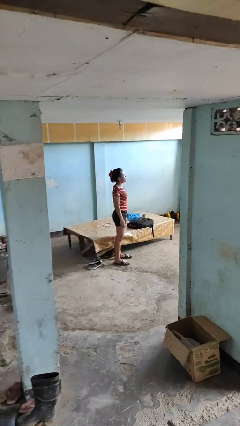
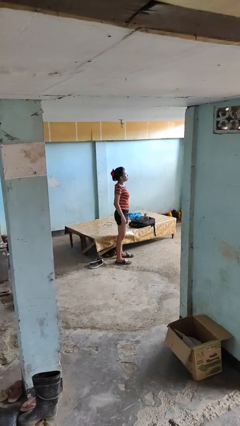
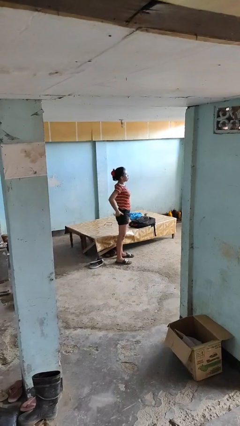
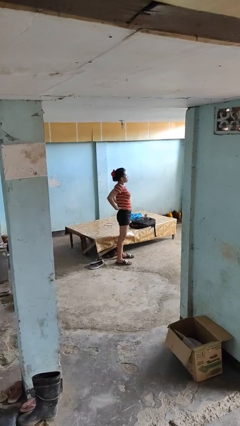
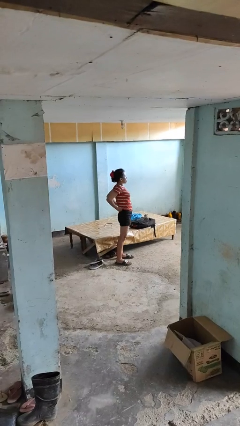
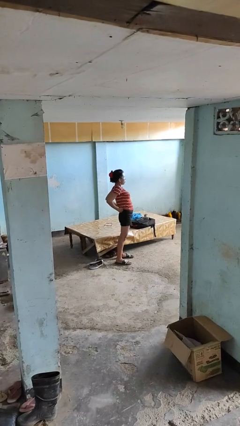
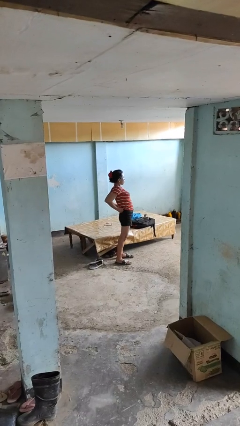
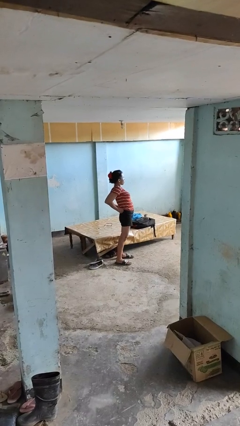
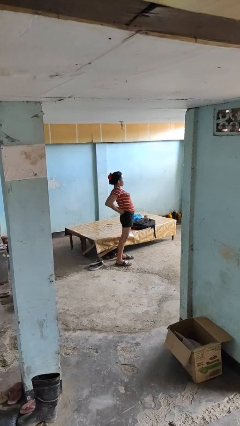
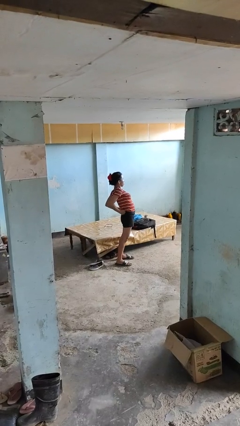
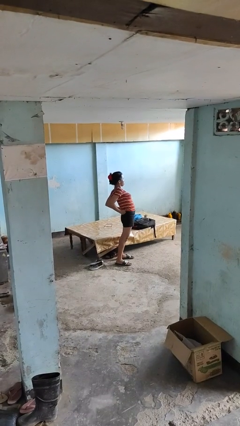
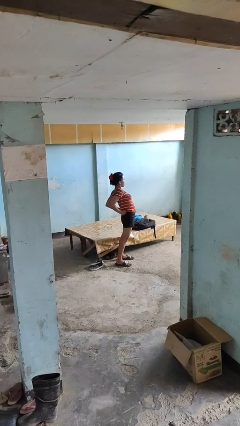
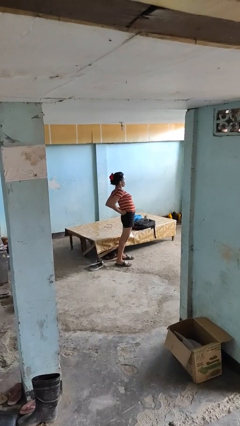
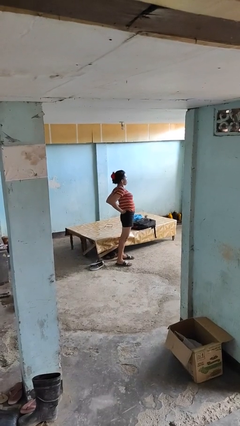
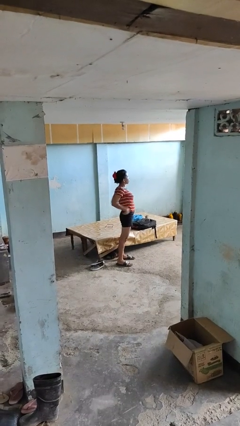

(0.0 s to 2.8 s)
person stretches back

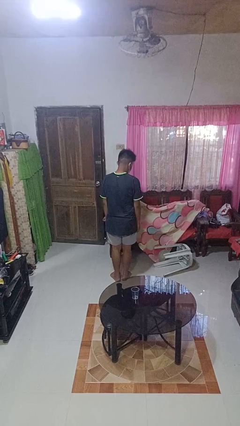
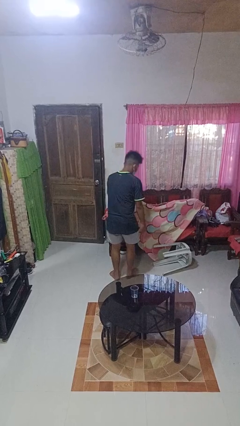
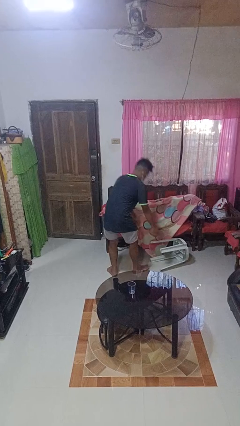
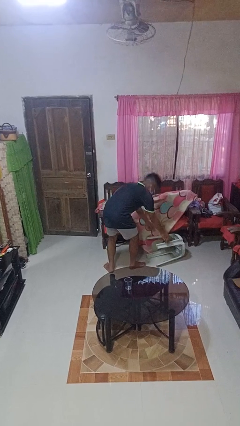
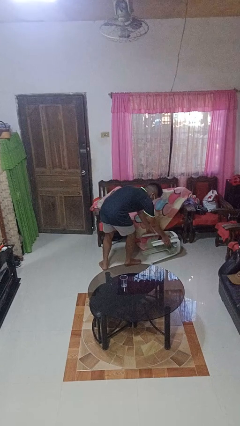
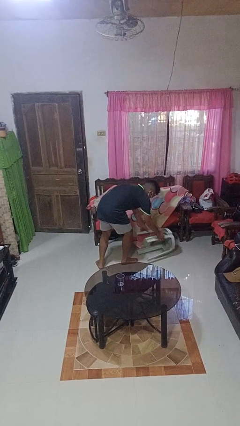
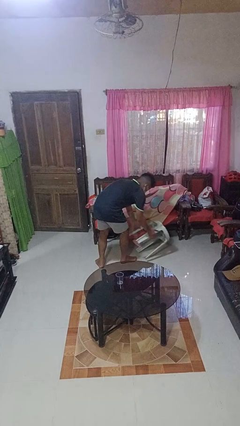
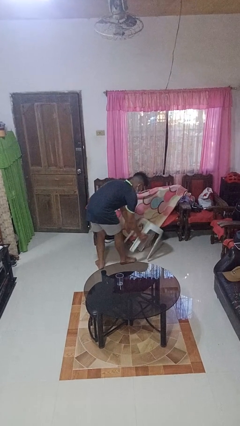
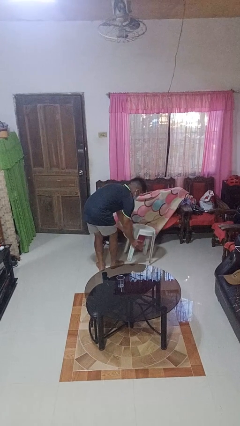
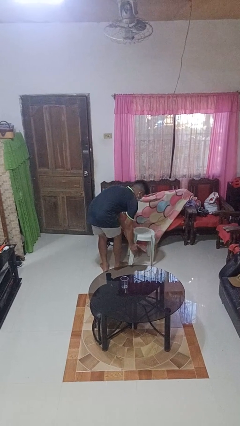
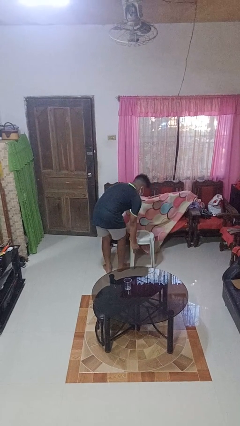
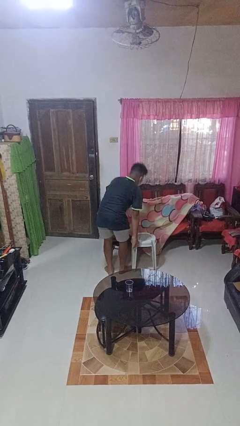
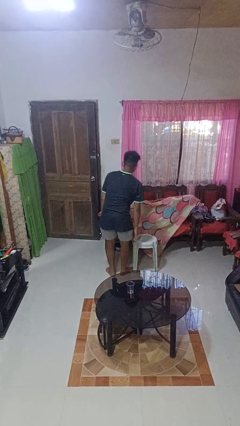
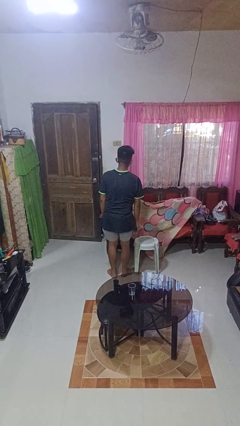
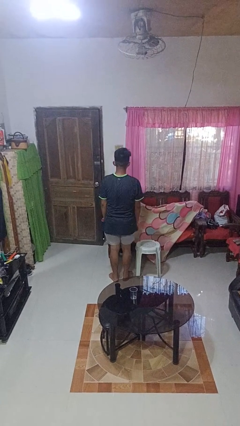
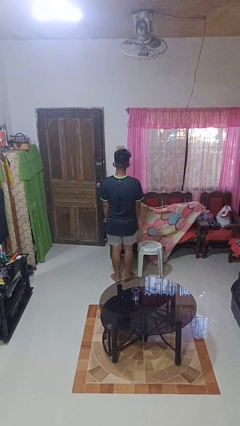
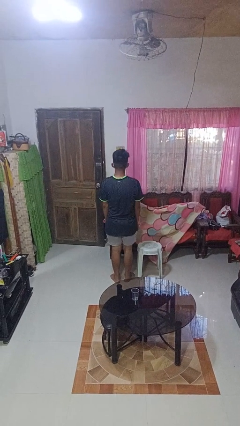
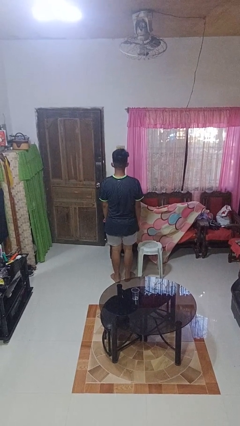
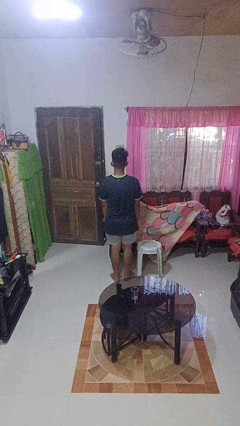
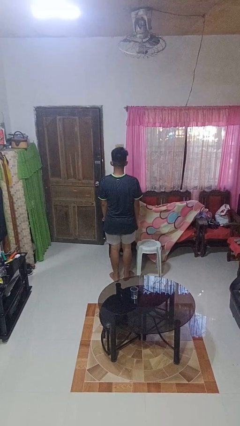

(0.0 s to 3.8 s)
person sets upright furniture

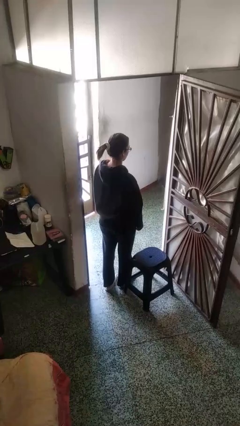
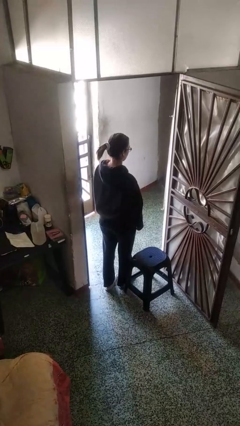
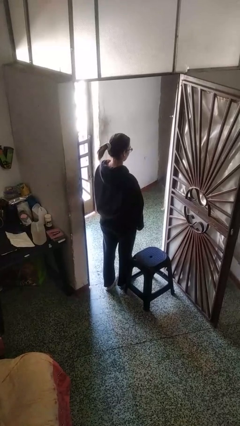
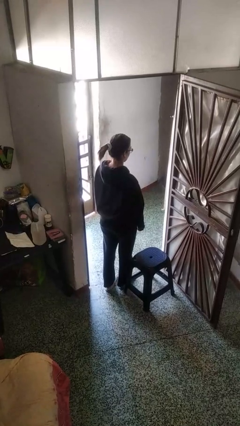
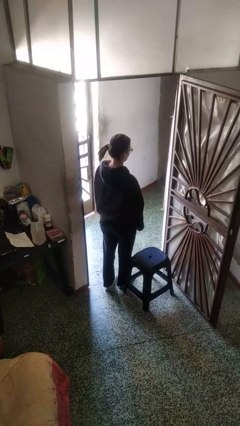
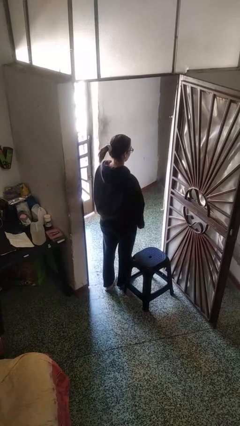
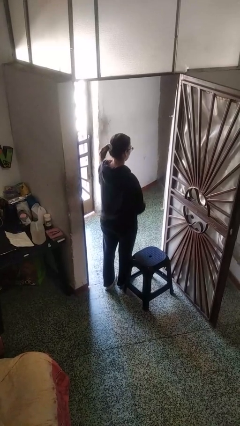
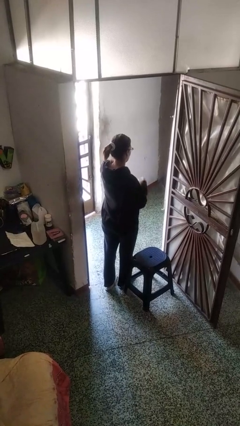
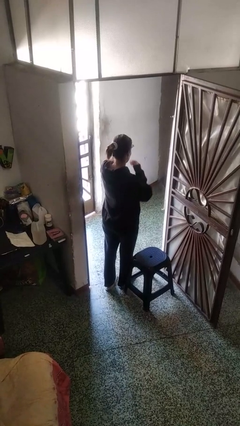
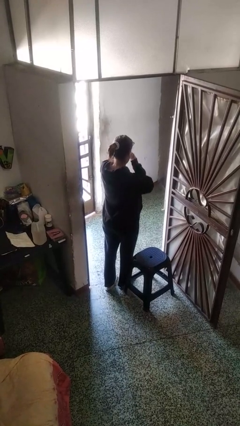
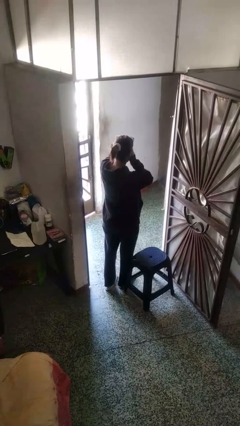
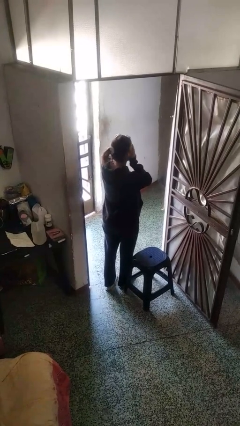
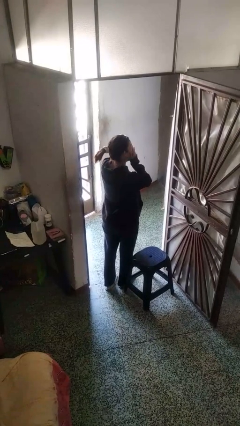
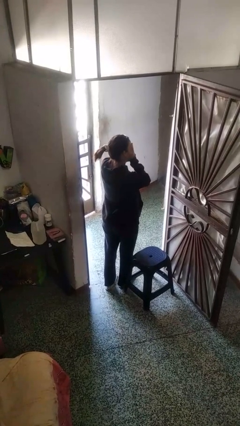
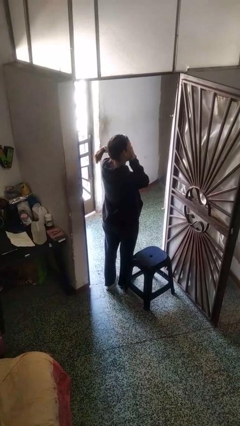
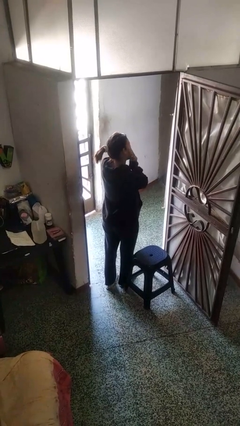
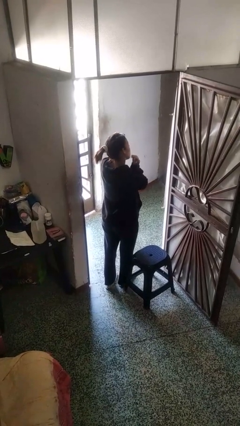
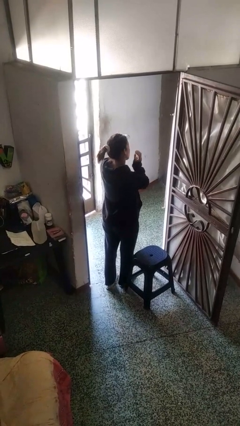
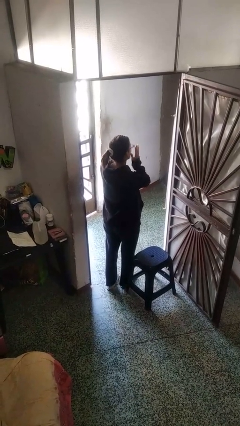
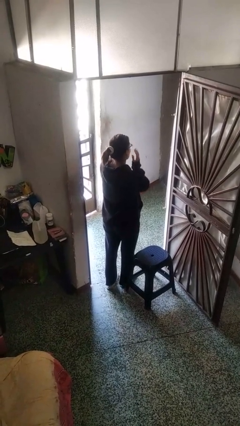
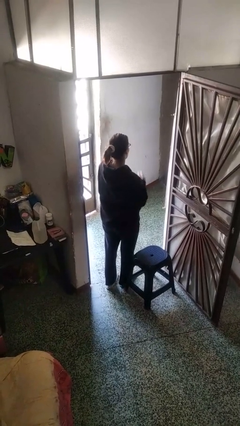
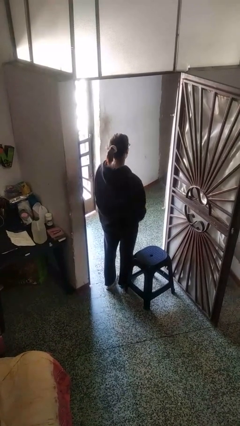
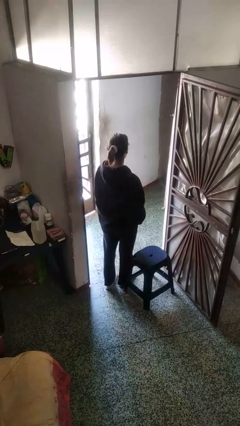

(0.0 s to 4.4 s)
person rubs eyes

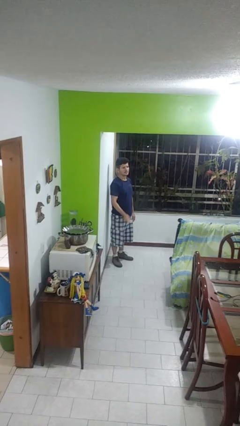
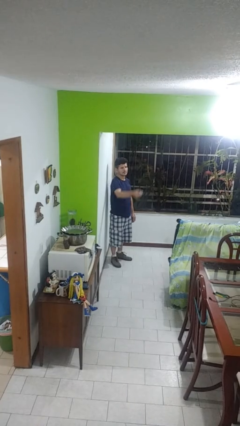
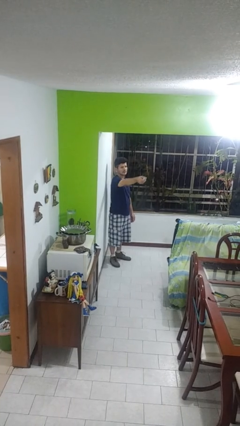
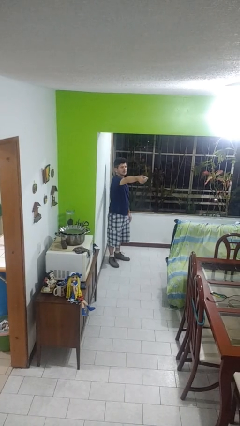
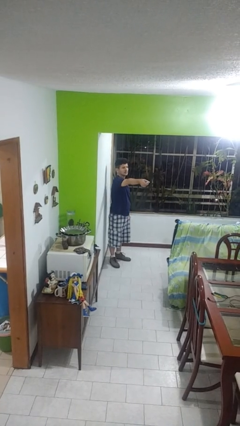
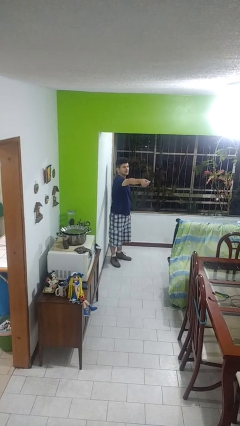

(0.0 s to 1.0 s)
person uses television remote

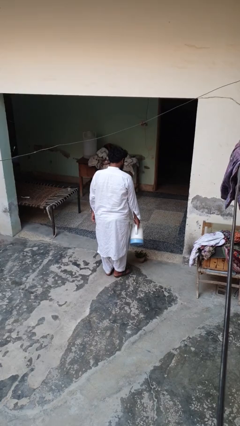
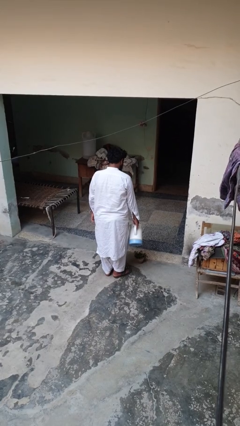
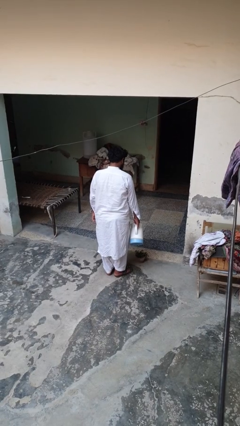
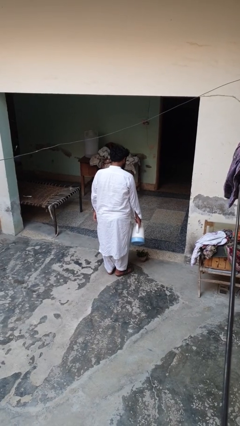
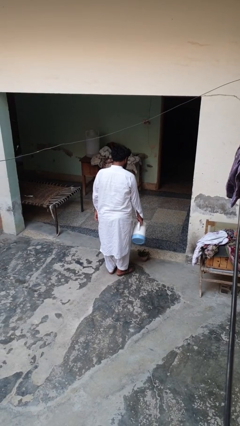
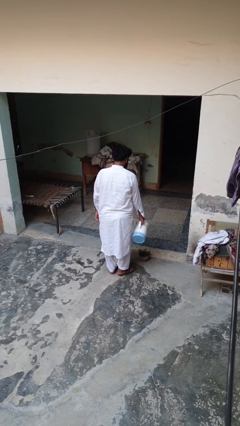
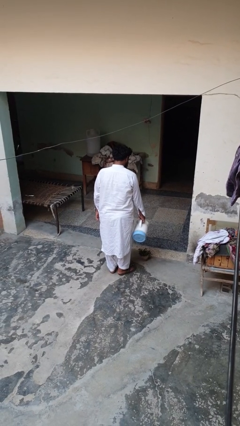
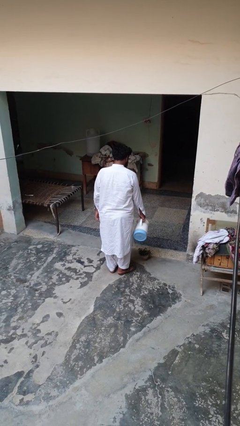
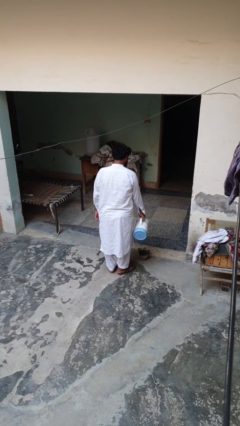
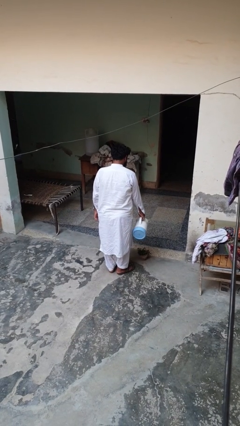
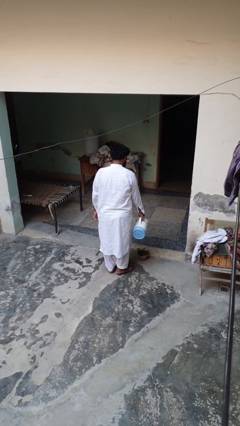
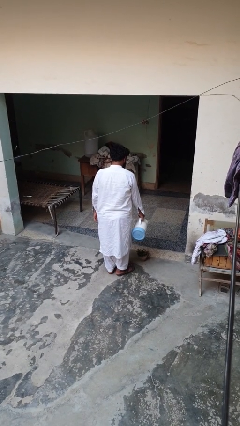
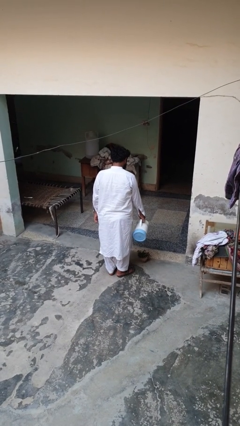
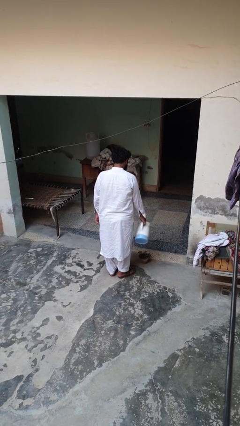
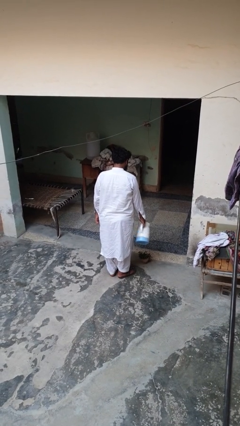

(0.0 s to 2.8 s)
person waters houseplant

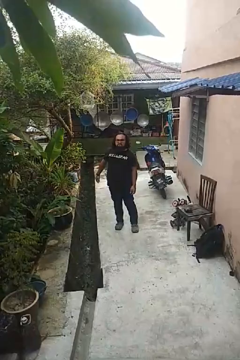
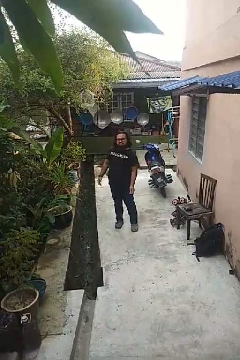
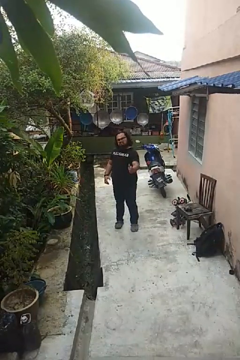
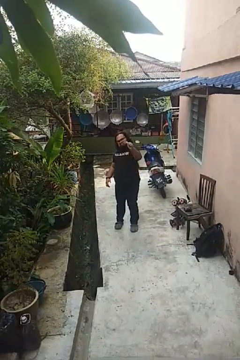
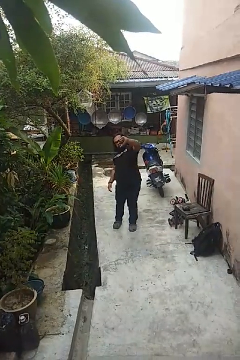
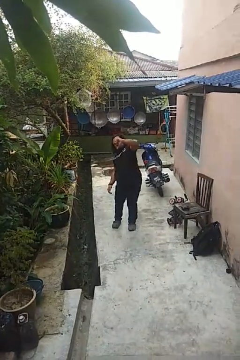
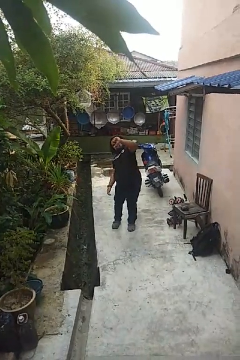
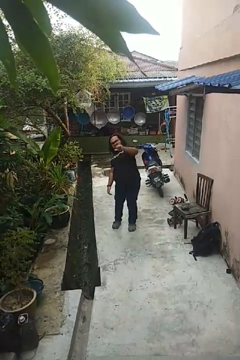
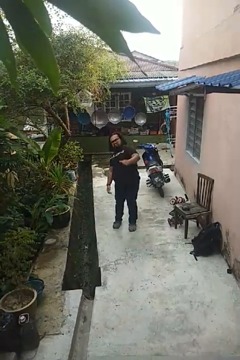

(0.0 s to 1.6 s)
person gestures thumbs down

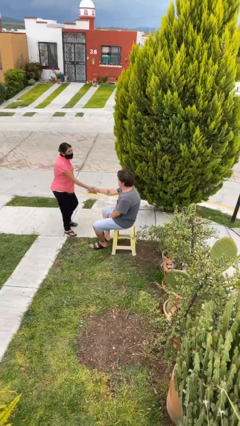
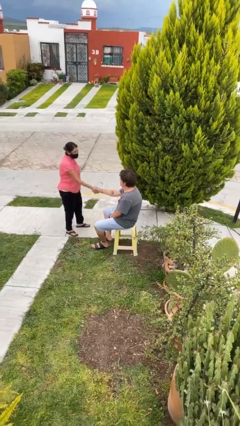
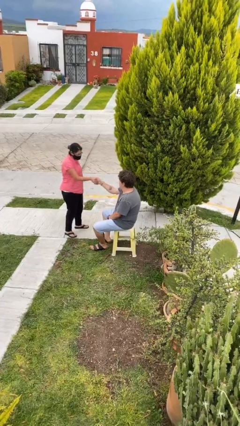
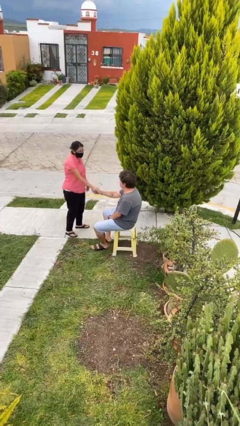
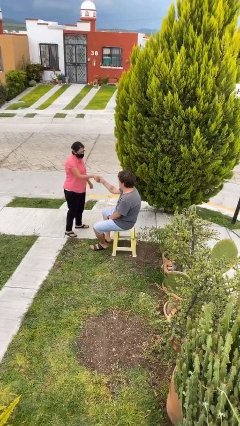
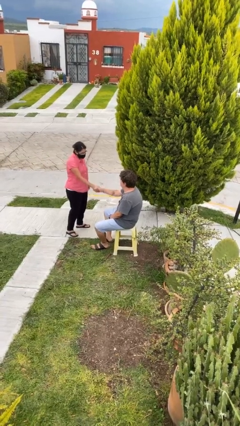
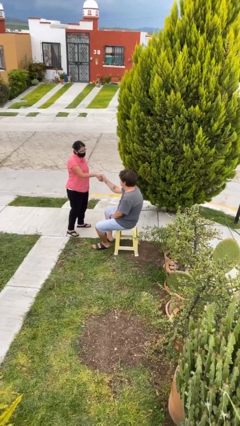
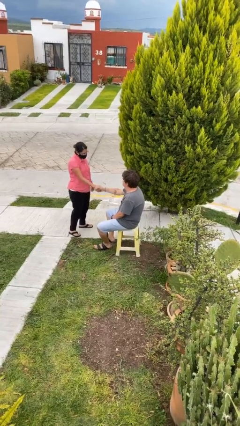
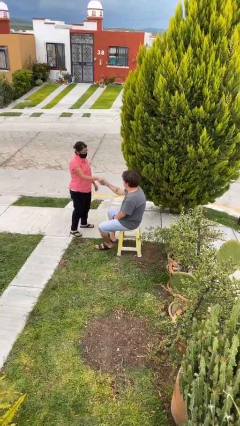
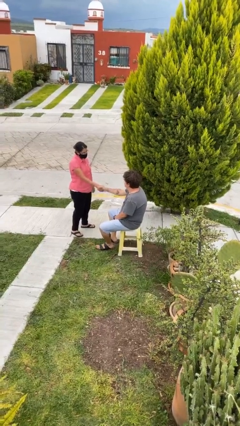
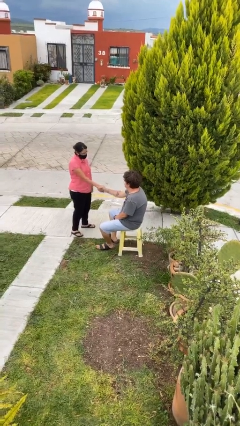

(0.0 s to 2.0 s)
person shakes hand
